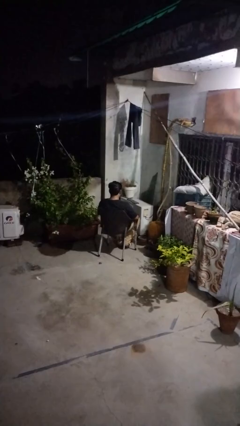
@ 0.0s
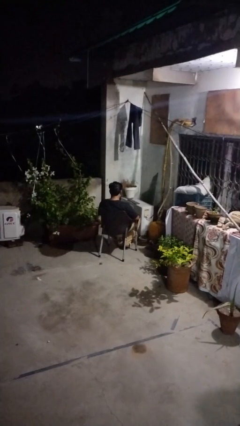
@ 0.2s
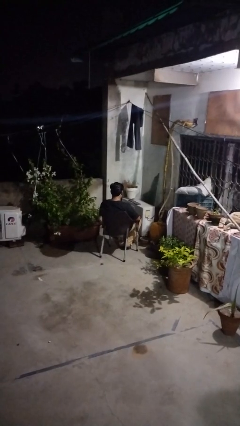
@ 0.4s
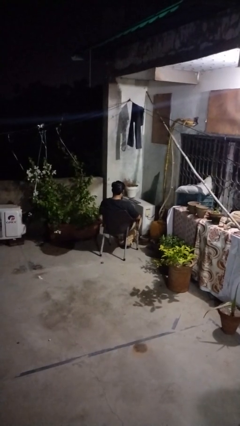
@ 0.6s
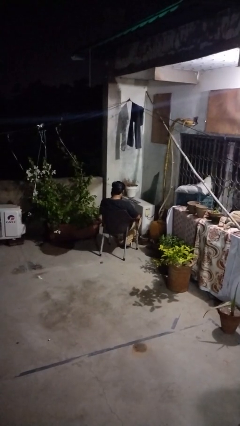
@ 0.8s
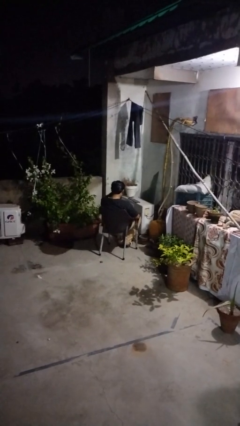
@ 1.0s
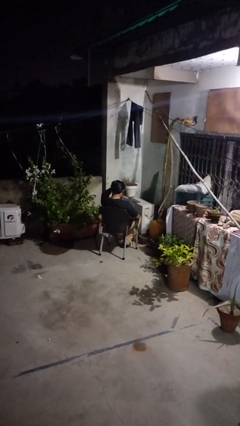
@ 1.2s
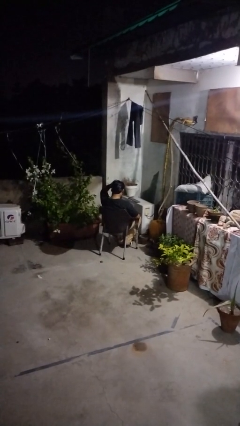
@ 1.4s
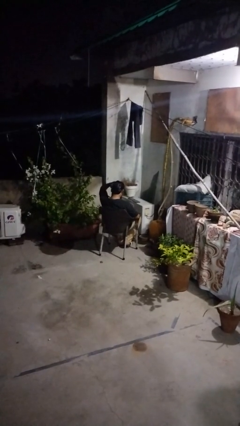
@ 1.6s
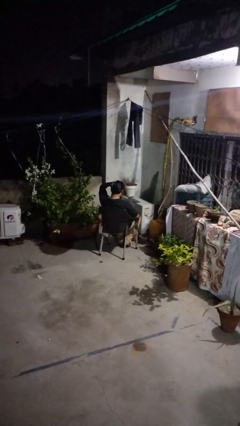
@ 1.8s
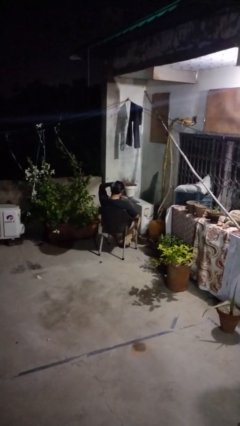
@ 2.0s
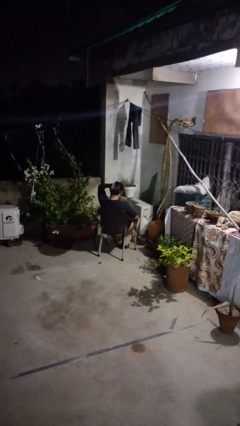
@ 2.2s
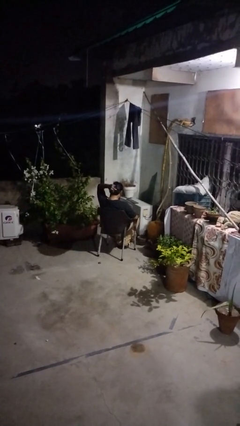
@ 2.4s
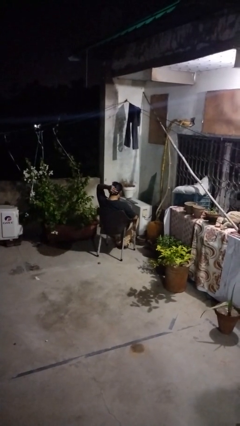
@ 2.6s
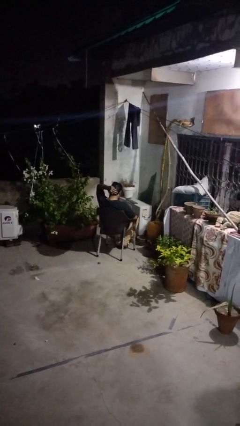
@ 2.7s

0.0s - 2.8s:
person strokes hair

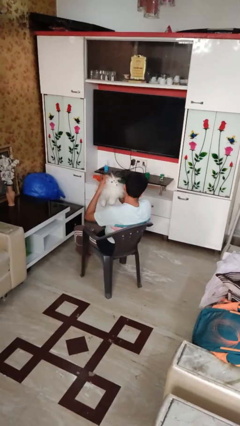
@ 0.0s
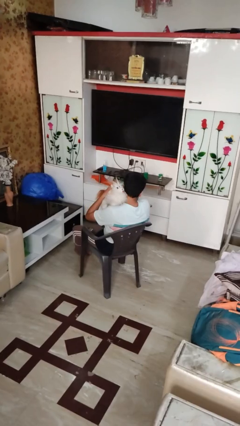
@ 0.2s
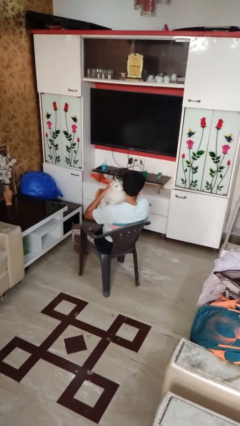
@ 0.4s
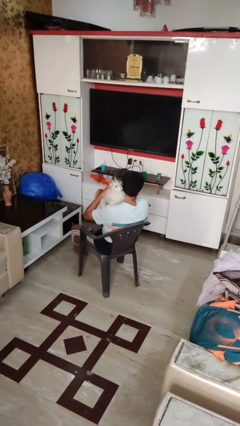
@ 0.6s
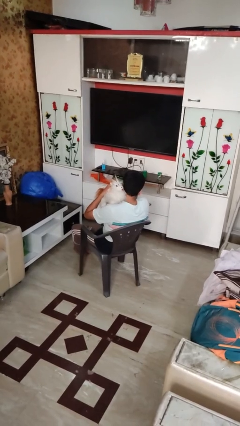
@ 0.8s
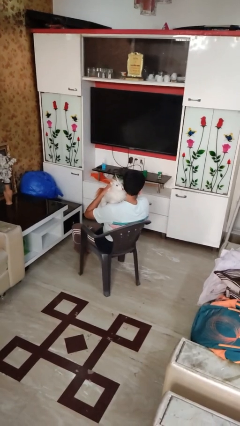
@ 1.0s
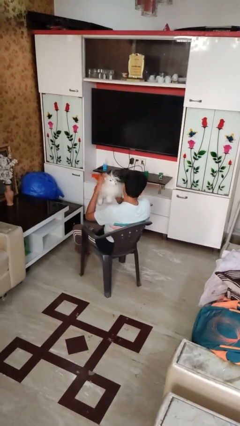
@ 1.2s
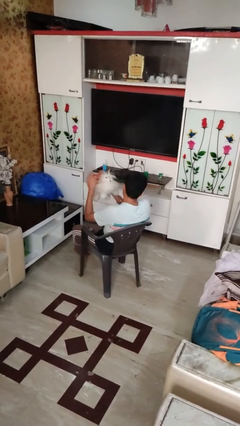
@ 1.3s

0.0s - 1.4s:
person hugs stuffed animal

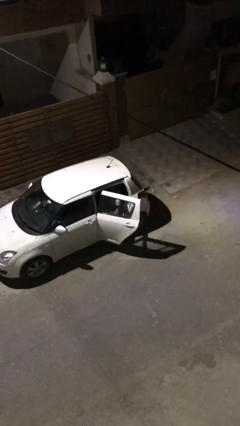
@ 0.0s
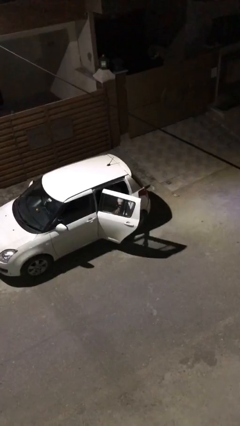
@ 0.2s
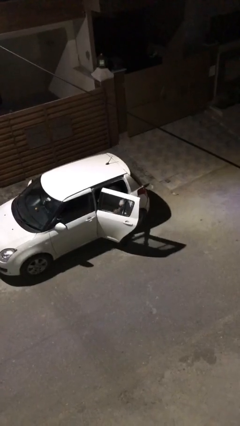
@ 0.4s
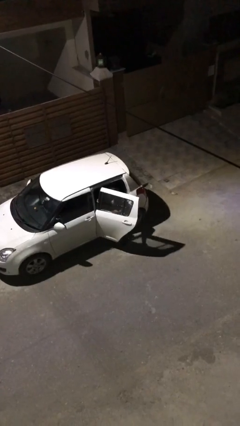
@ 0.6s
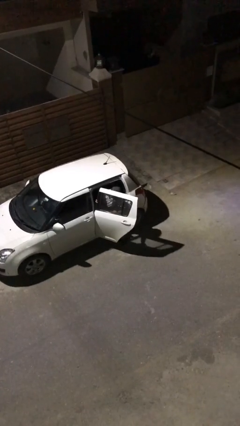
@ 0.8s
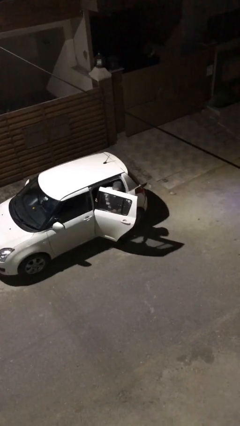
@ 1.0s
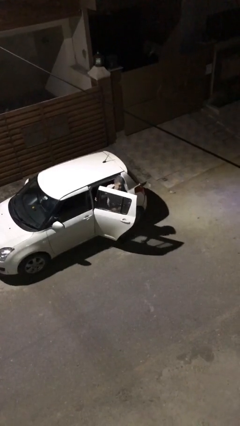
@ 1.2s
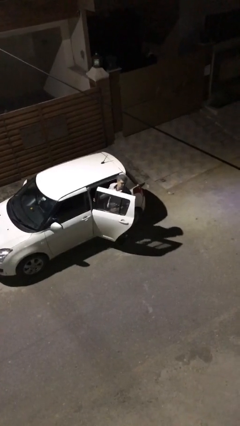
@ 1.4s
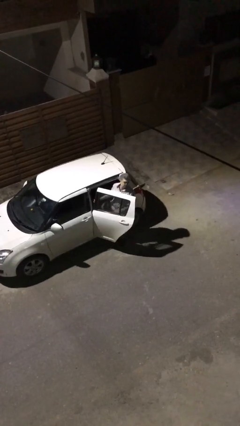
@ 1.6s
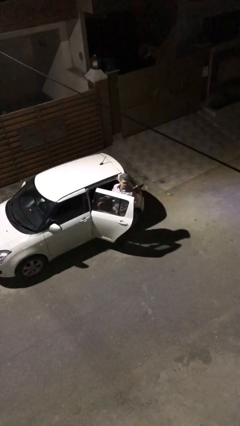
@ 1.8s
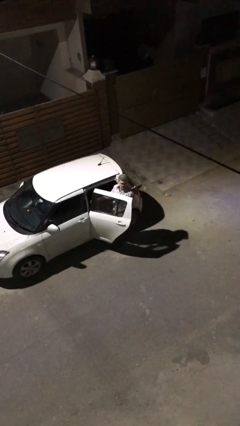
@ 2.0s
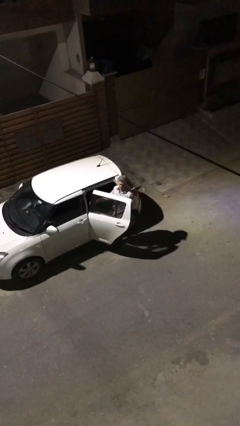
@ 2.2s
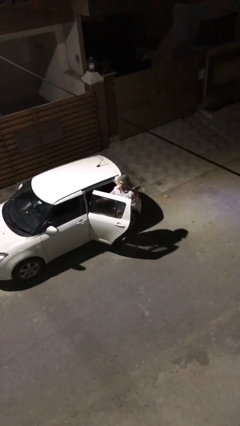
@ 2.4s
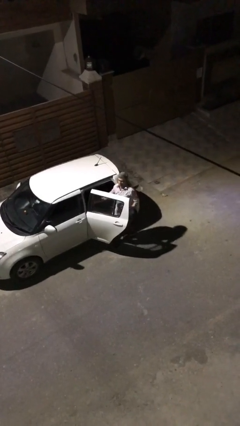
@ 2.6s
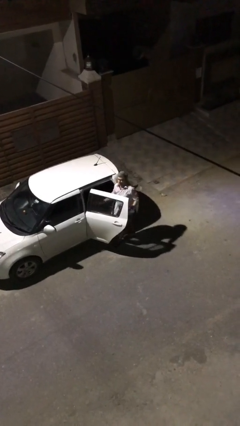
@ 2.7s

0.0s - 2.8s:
person exits car

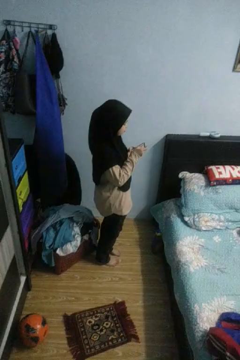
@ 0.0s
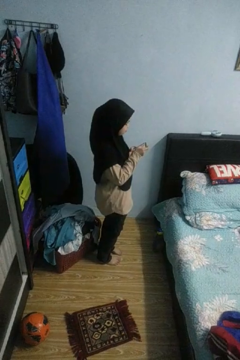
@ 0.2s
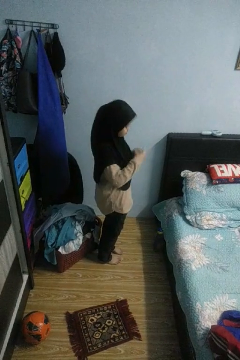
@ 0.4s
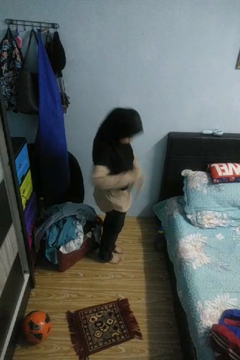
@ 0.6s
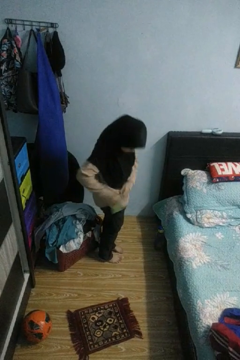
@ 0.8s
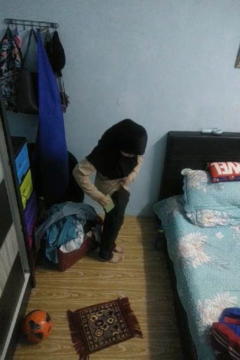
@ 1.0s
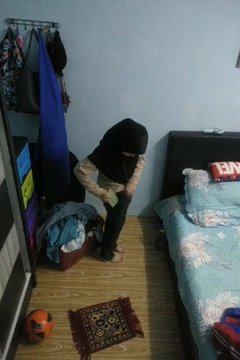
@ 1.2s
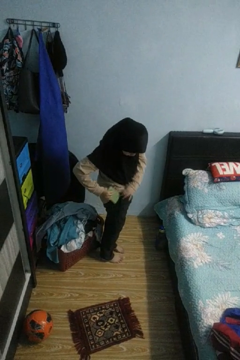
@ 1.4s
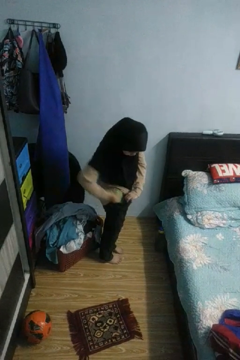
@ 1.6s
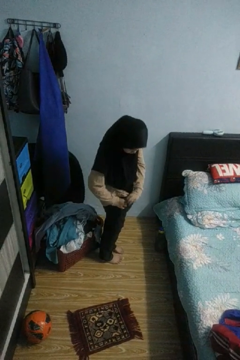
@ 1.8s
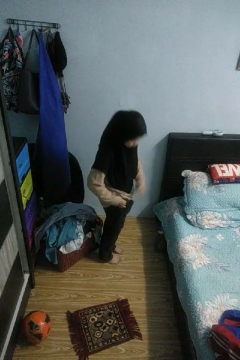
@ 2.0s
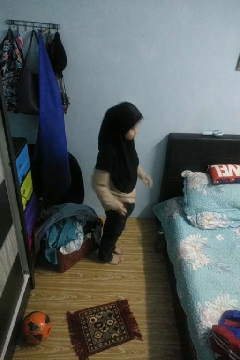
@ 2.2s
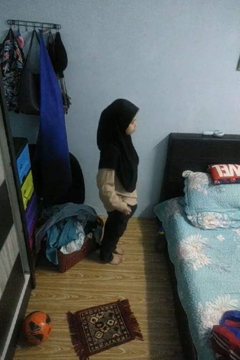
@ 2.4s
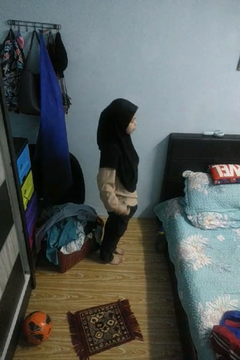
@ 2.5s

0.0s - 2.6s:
person puts phone into pocket

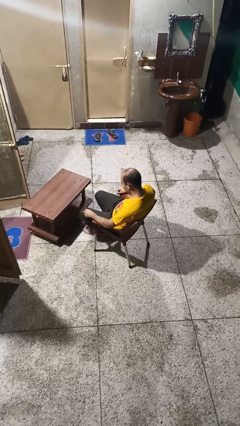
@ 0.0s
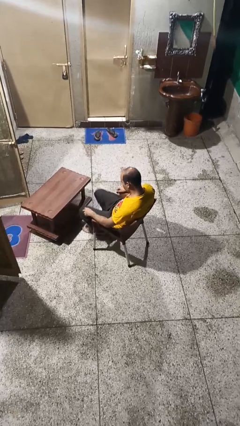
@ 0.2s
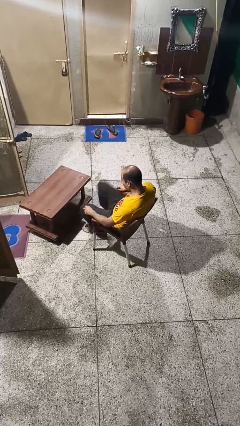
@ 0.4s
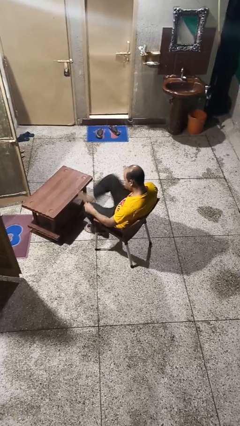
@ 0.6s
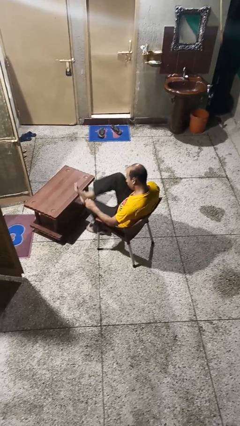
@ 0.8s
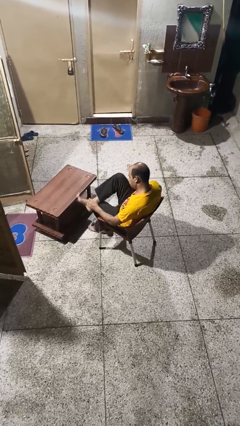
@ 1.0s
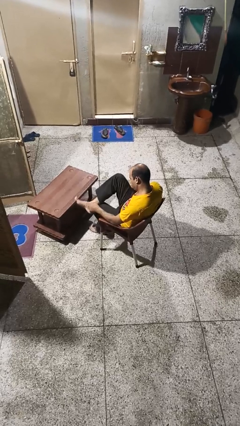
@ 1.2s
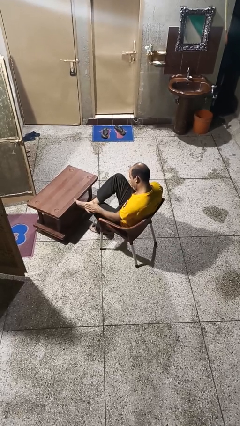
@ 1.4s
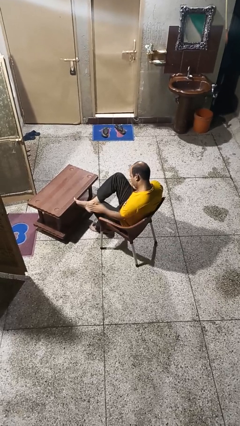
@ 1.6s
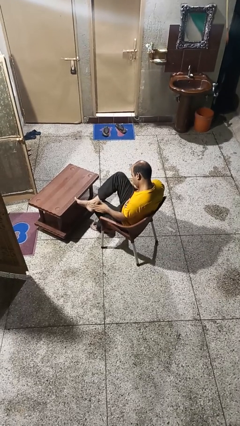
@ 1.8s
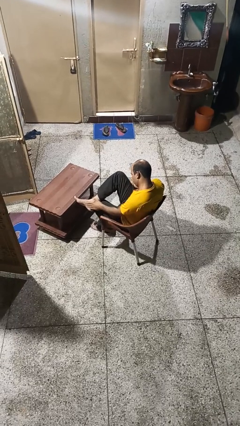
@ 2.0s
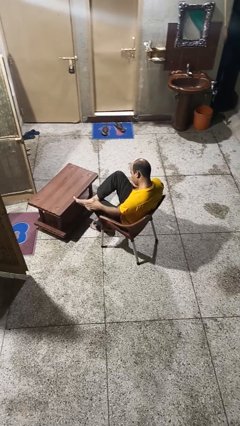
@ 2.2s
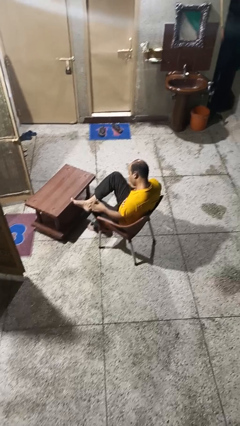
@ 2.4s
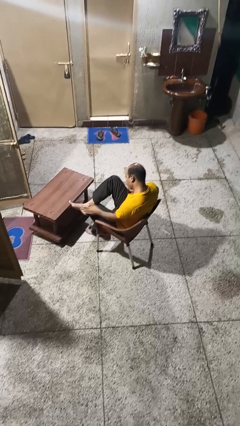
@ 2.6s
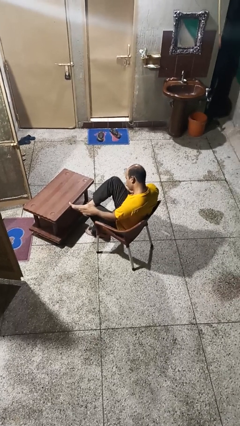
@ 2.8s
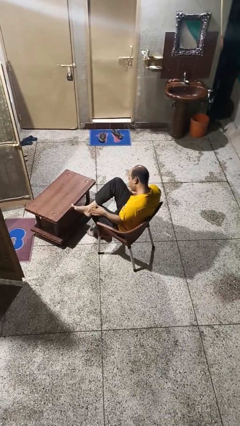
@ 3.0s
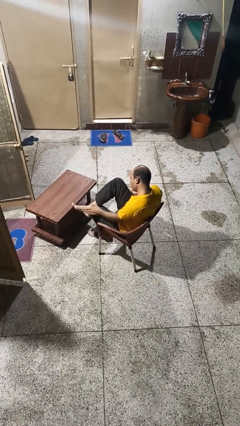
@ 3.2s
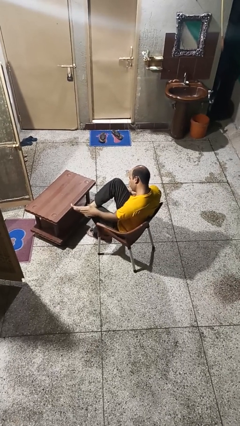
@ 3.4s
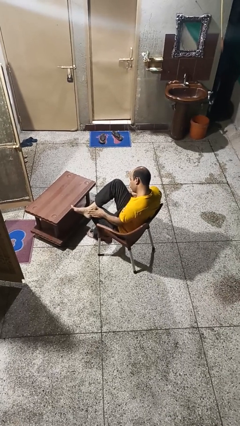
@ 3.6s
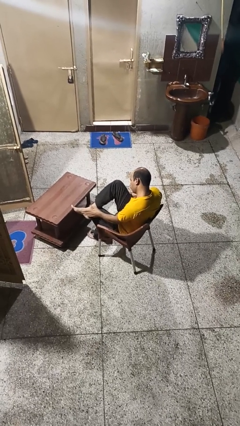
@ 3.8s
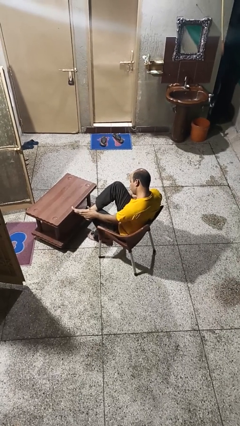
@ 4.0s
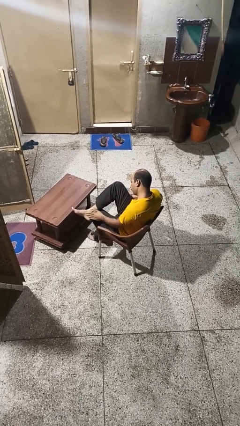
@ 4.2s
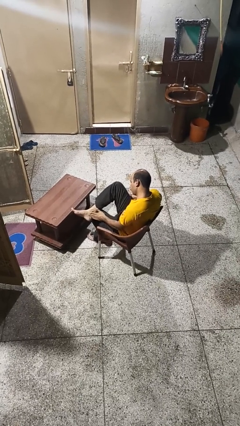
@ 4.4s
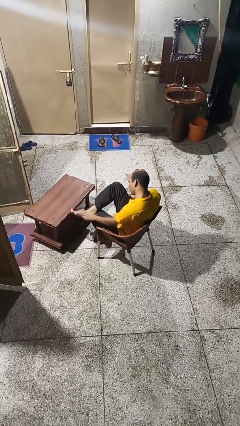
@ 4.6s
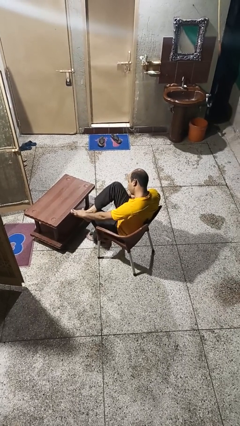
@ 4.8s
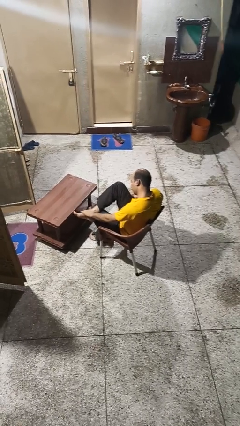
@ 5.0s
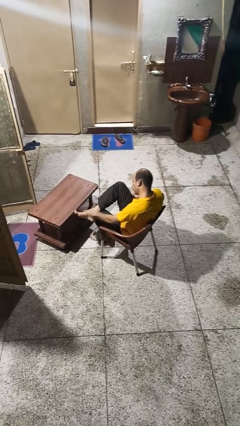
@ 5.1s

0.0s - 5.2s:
person rubs foot

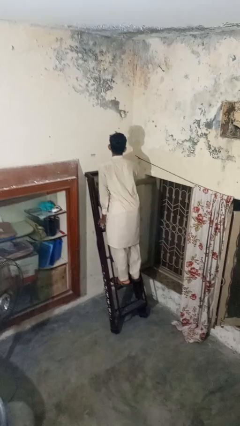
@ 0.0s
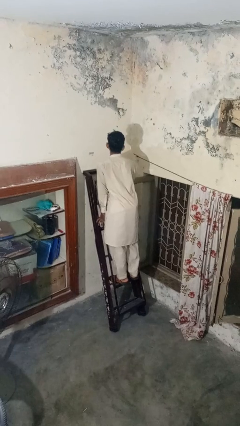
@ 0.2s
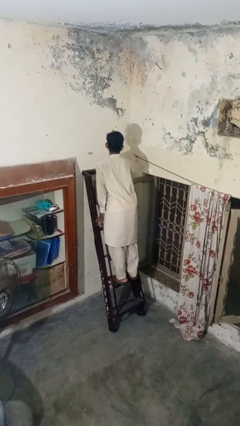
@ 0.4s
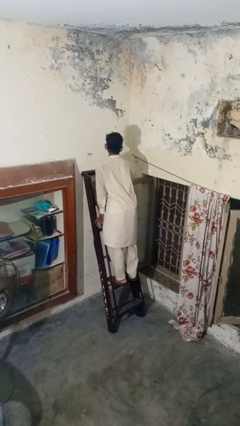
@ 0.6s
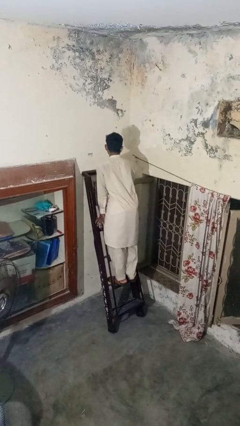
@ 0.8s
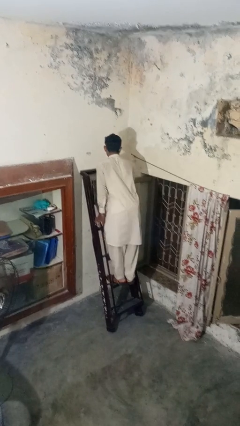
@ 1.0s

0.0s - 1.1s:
person climbs down ladder

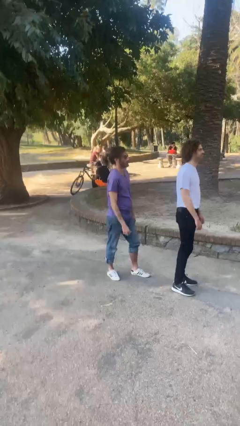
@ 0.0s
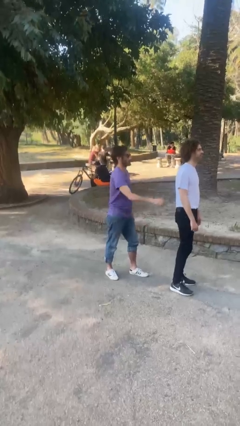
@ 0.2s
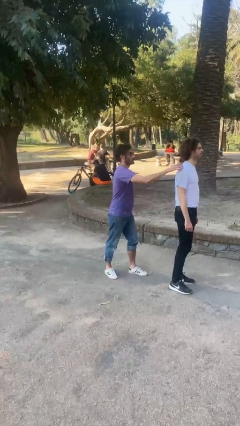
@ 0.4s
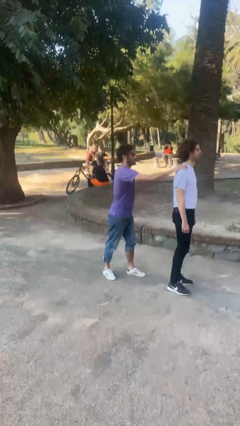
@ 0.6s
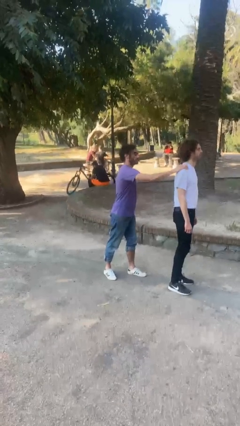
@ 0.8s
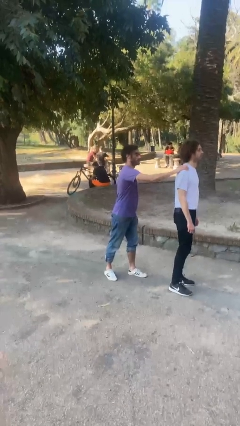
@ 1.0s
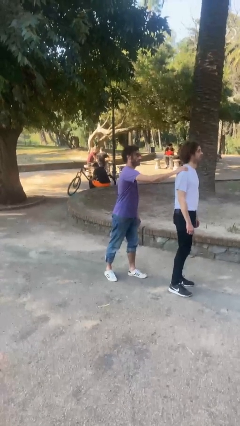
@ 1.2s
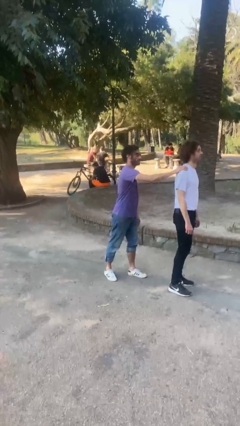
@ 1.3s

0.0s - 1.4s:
person grabs person by shoulder

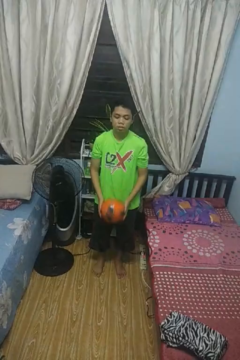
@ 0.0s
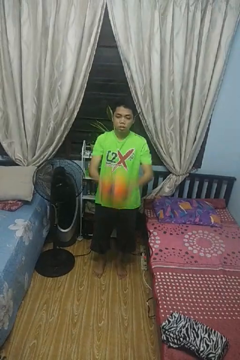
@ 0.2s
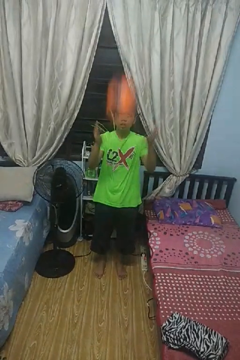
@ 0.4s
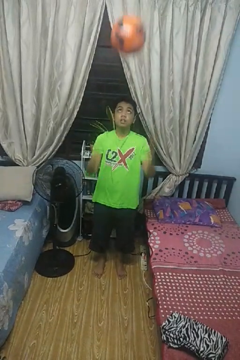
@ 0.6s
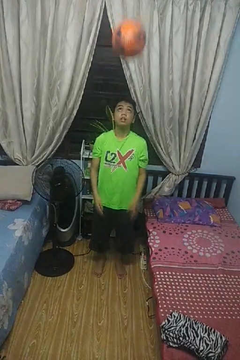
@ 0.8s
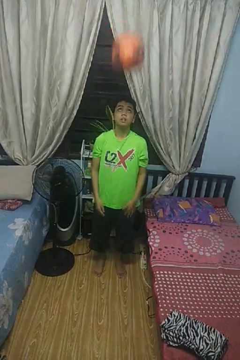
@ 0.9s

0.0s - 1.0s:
person drops object
